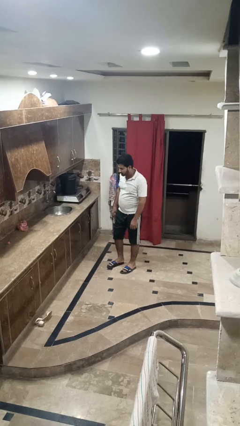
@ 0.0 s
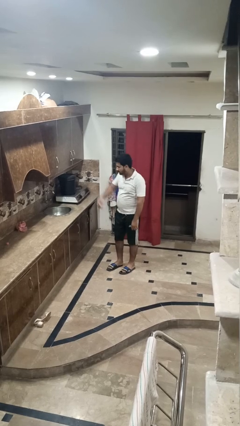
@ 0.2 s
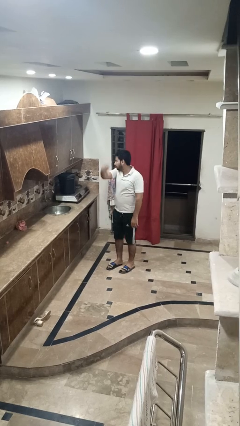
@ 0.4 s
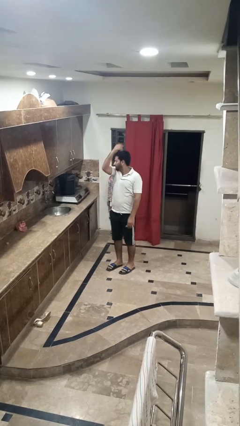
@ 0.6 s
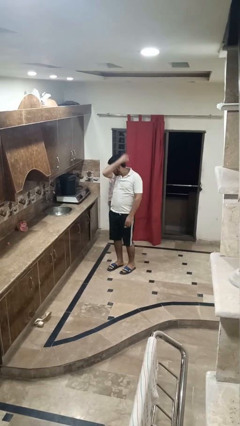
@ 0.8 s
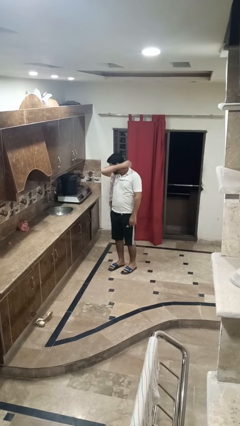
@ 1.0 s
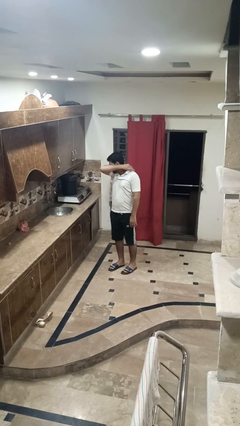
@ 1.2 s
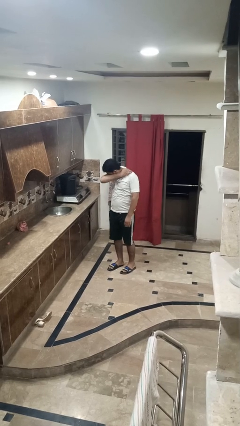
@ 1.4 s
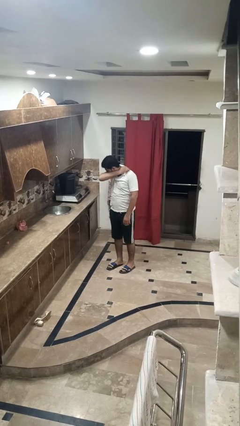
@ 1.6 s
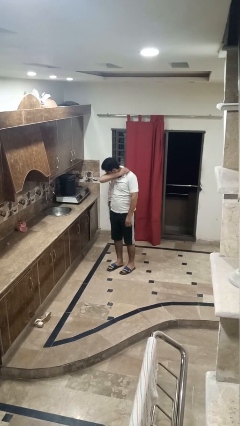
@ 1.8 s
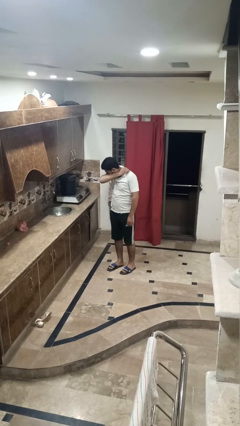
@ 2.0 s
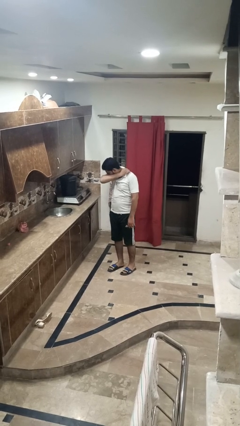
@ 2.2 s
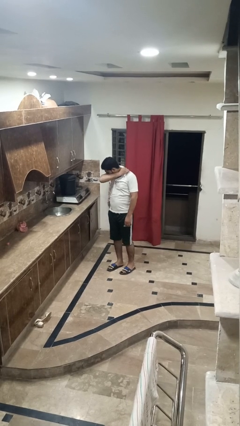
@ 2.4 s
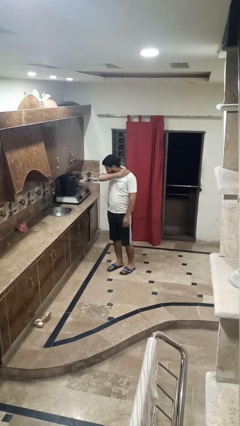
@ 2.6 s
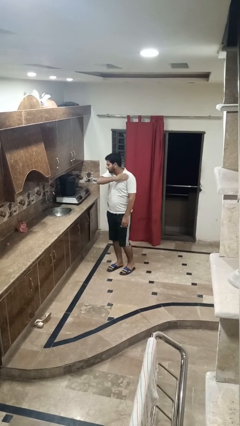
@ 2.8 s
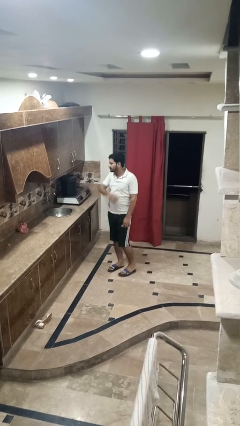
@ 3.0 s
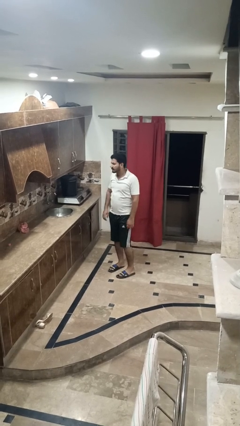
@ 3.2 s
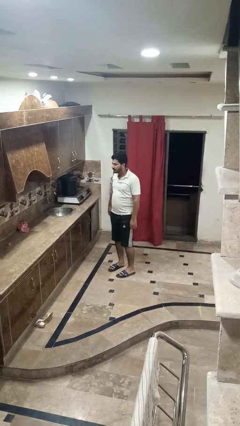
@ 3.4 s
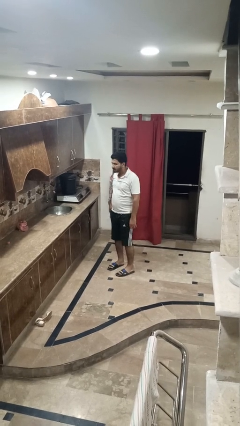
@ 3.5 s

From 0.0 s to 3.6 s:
person sneezes into arm

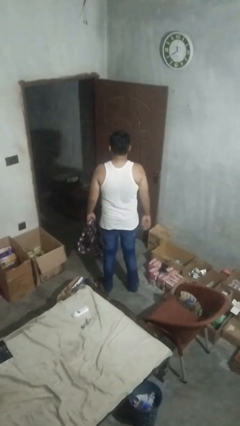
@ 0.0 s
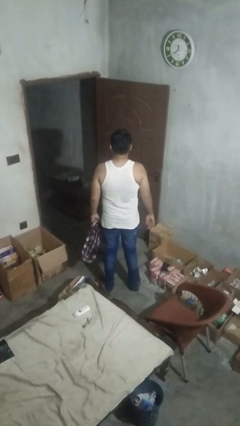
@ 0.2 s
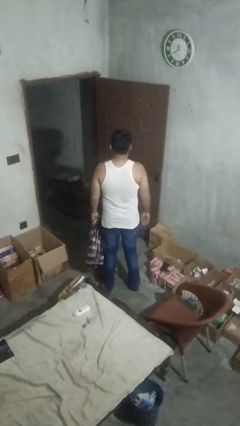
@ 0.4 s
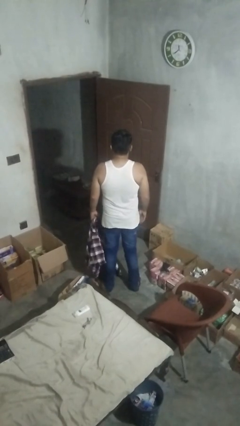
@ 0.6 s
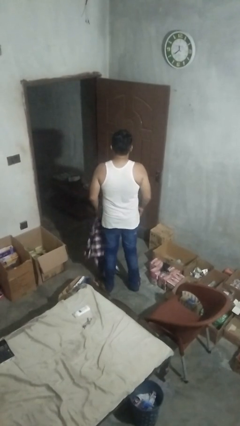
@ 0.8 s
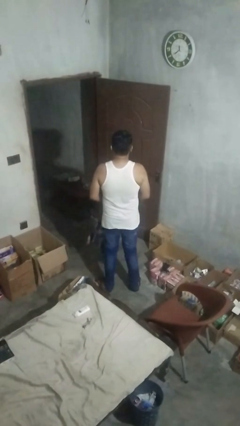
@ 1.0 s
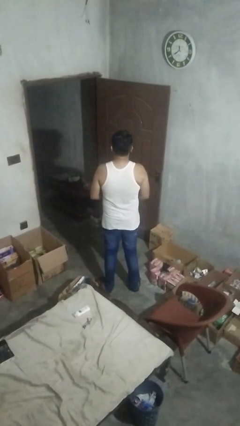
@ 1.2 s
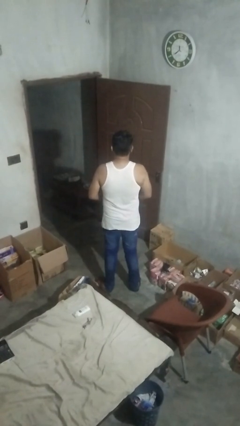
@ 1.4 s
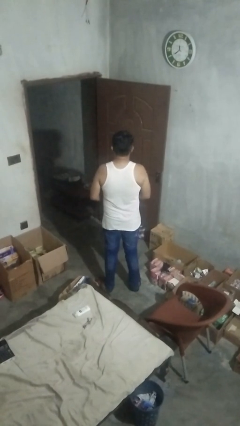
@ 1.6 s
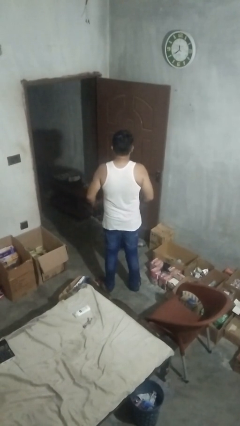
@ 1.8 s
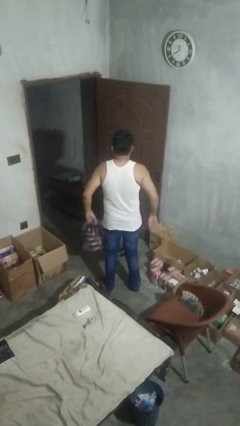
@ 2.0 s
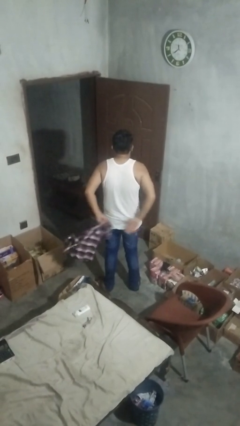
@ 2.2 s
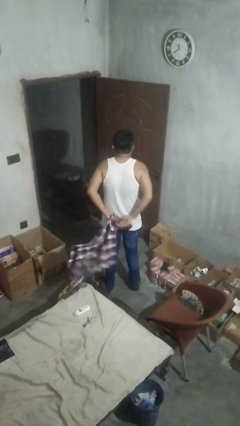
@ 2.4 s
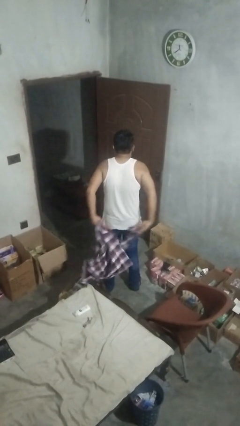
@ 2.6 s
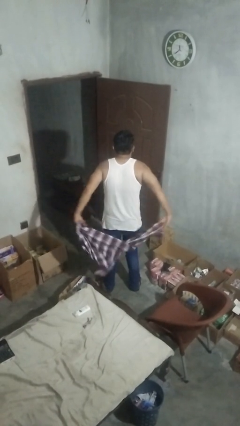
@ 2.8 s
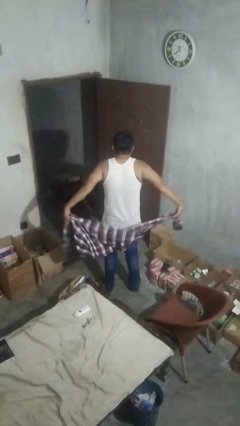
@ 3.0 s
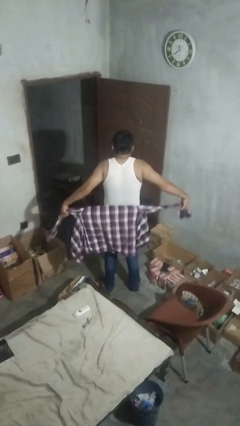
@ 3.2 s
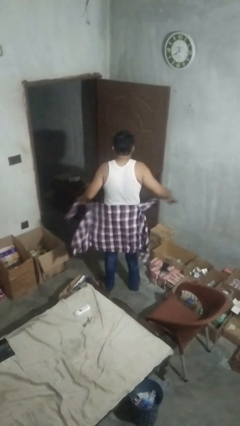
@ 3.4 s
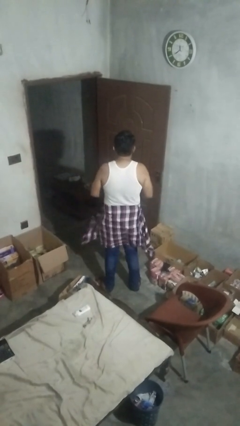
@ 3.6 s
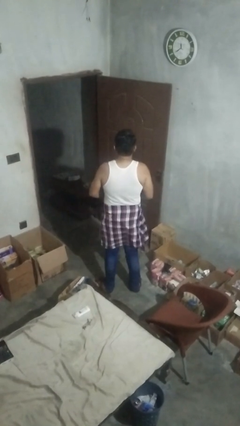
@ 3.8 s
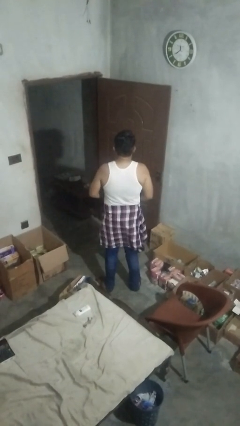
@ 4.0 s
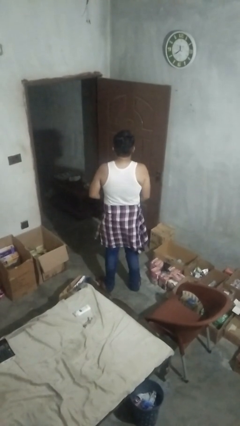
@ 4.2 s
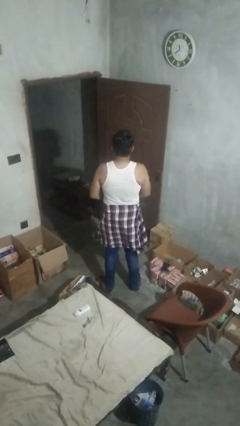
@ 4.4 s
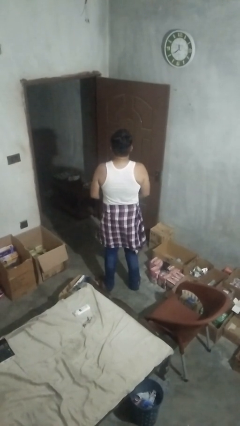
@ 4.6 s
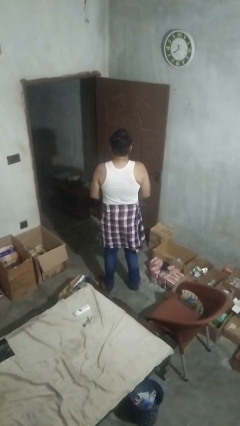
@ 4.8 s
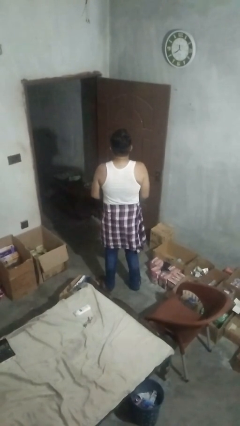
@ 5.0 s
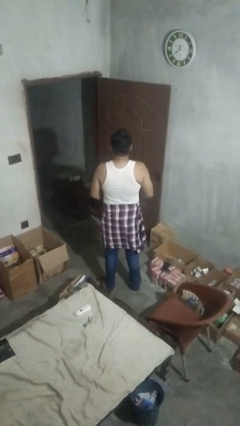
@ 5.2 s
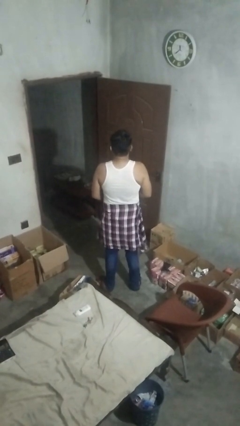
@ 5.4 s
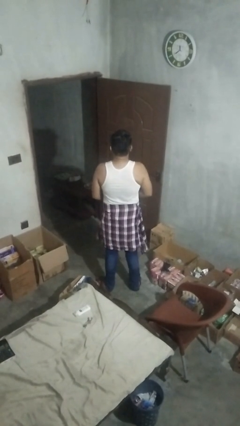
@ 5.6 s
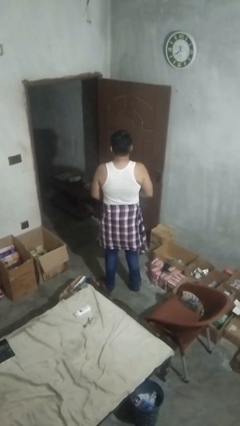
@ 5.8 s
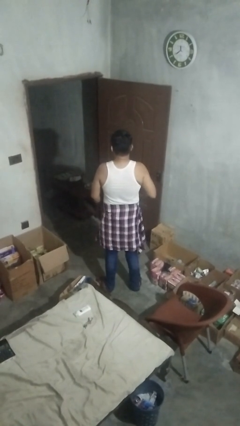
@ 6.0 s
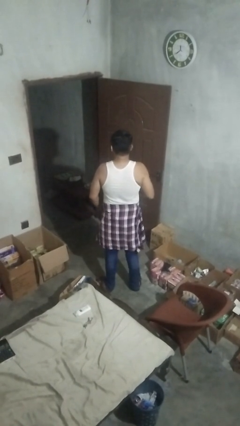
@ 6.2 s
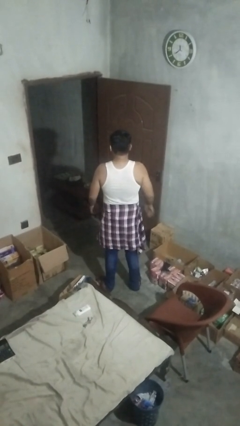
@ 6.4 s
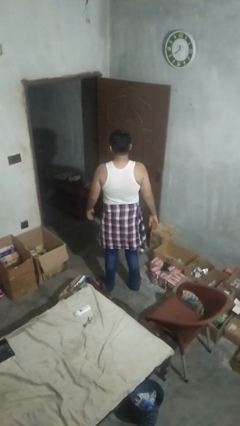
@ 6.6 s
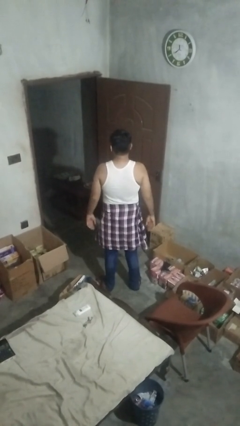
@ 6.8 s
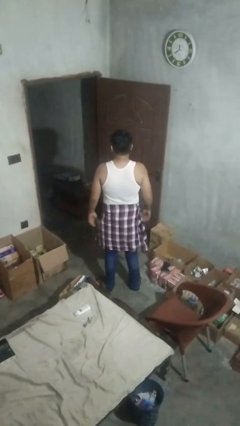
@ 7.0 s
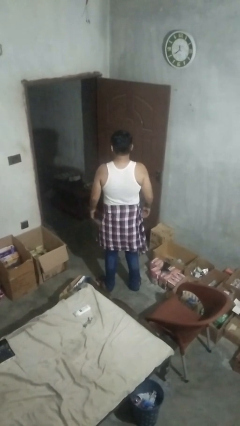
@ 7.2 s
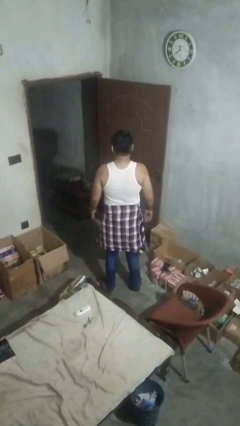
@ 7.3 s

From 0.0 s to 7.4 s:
person ties jacket around waist

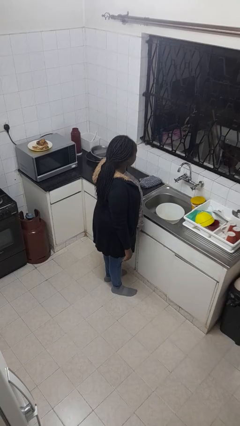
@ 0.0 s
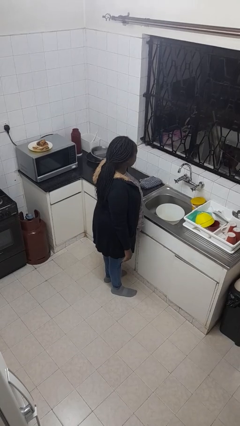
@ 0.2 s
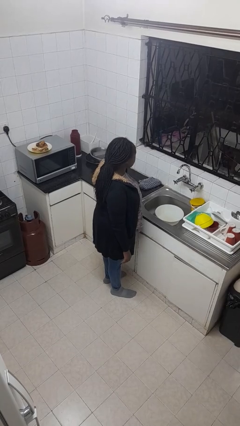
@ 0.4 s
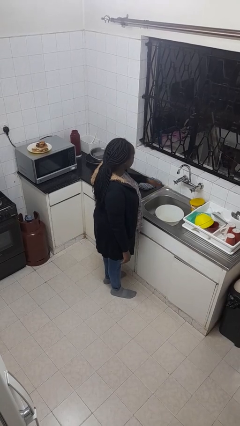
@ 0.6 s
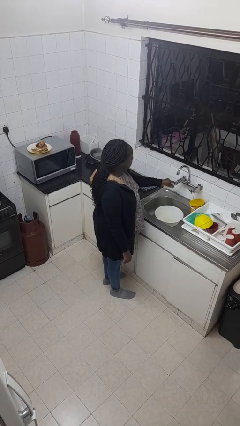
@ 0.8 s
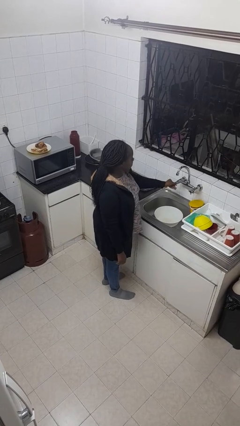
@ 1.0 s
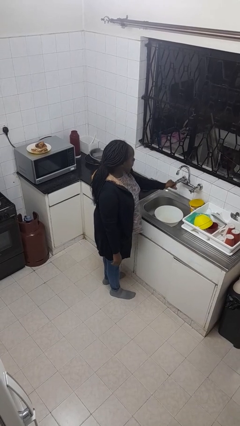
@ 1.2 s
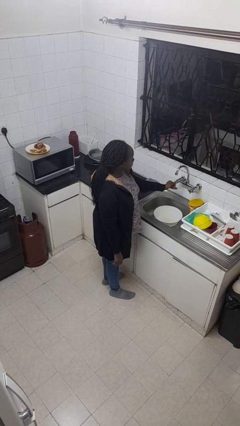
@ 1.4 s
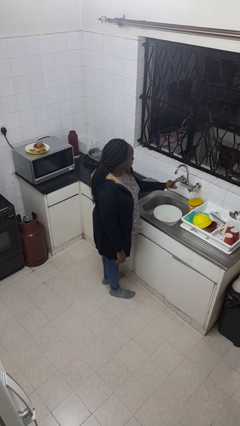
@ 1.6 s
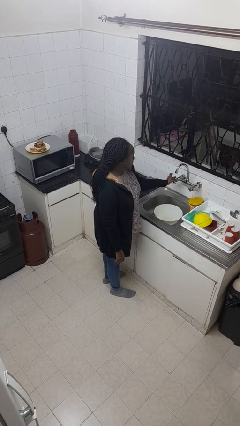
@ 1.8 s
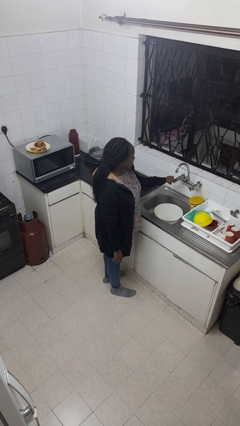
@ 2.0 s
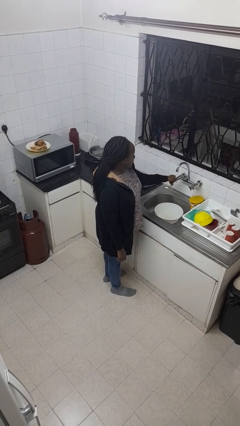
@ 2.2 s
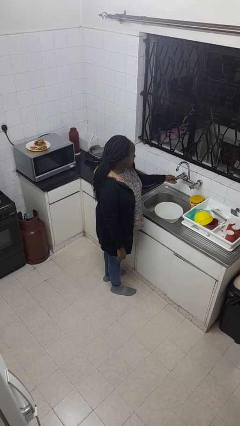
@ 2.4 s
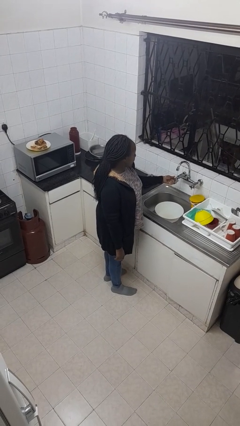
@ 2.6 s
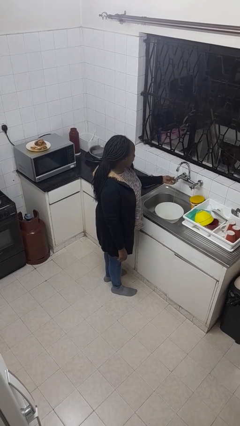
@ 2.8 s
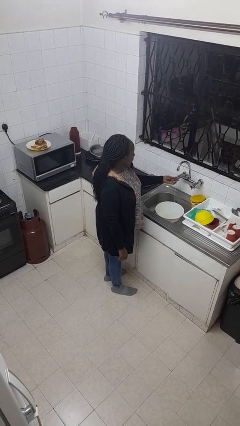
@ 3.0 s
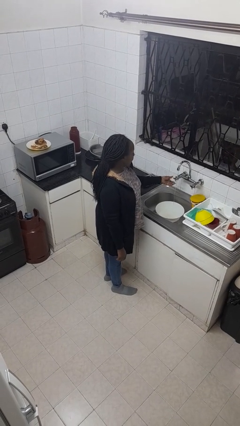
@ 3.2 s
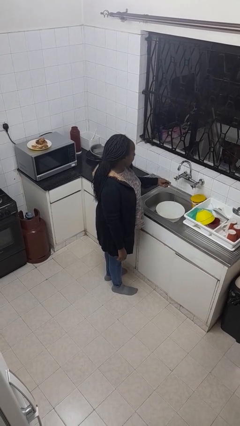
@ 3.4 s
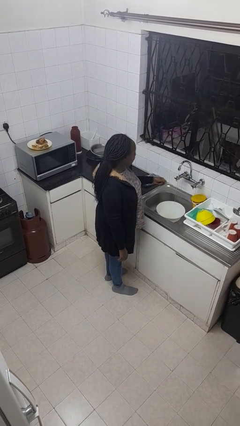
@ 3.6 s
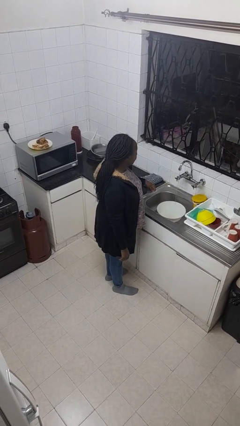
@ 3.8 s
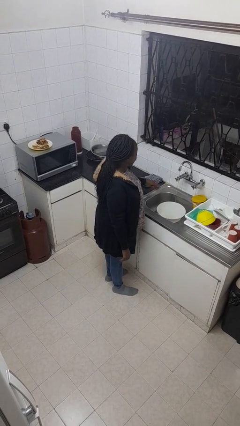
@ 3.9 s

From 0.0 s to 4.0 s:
person turns on faucet

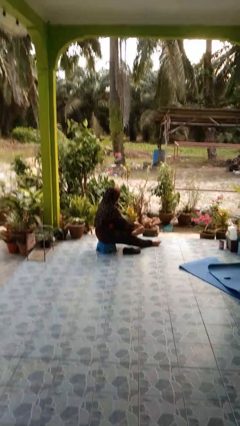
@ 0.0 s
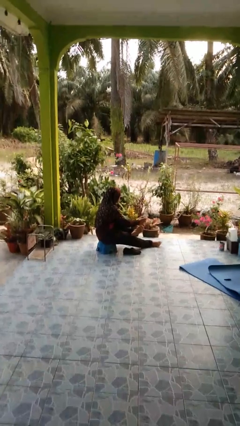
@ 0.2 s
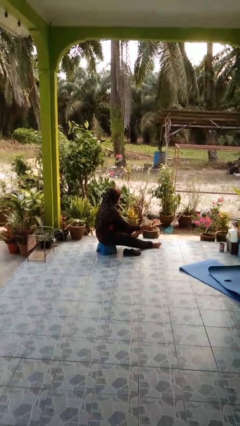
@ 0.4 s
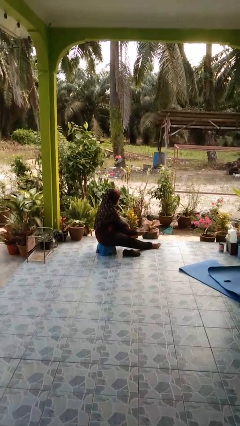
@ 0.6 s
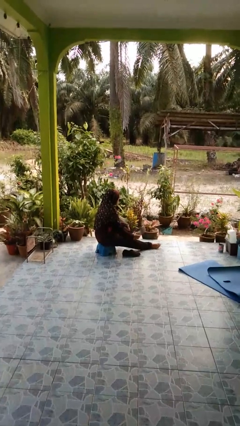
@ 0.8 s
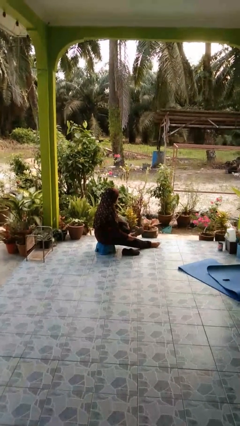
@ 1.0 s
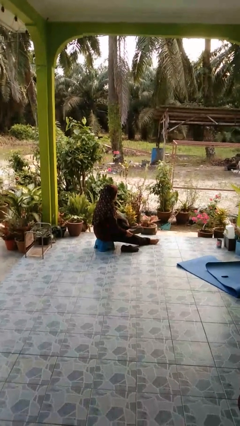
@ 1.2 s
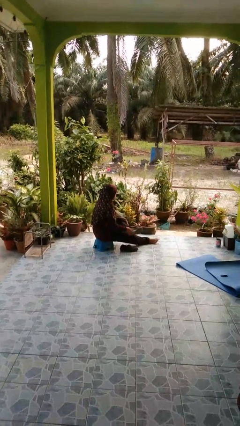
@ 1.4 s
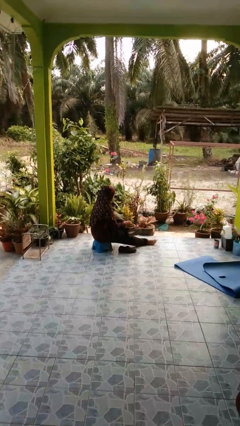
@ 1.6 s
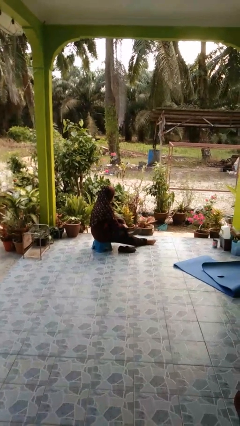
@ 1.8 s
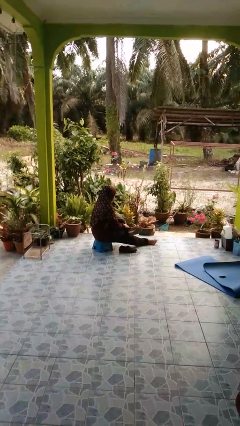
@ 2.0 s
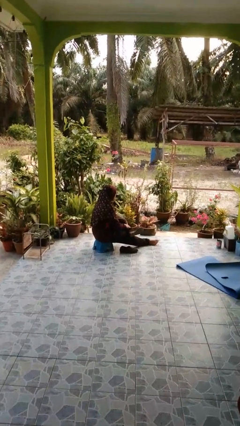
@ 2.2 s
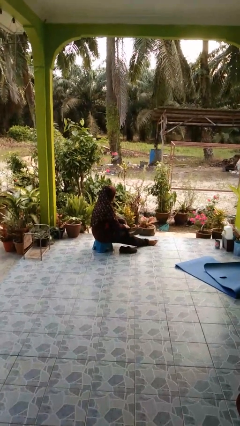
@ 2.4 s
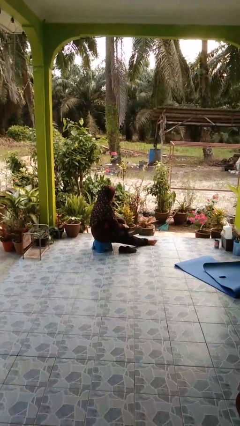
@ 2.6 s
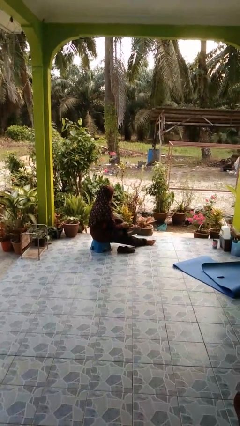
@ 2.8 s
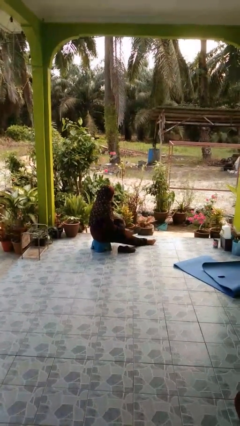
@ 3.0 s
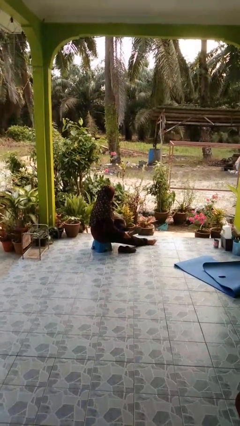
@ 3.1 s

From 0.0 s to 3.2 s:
person puts on shoes
